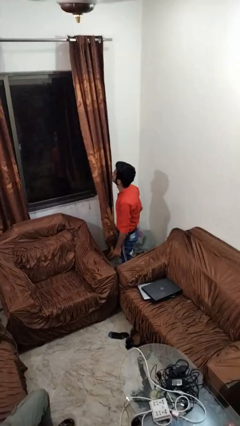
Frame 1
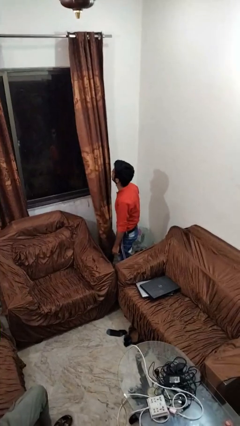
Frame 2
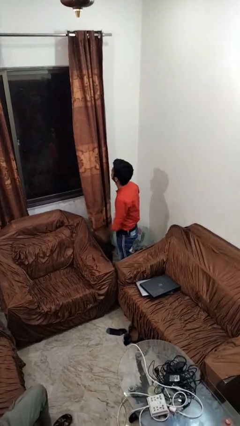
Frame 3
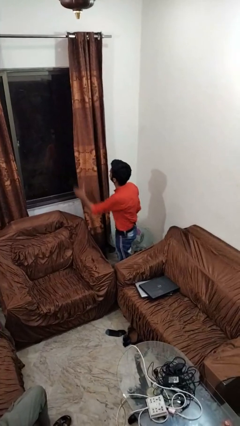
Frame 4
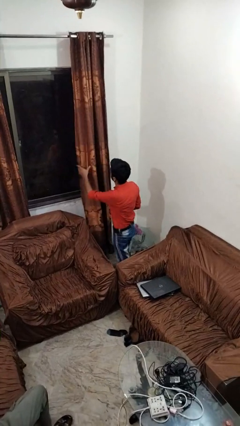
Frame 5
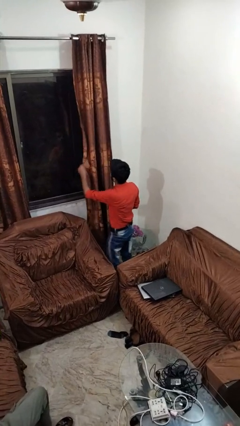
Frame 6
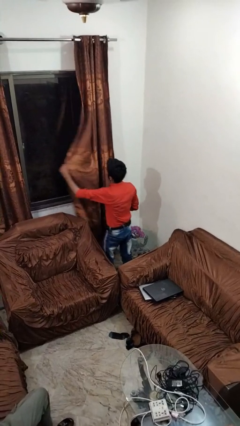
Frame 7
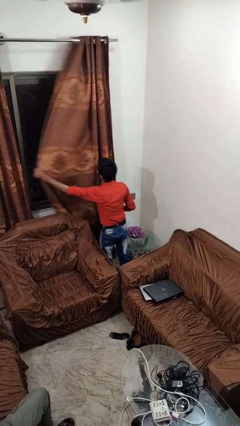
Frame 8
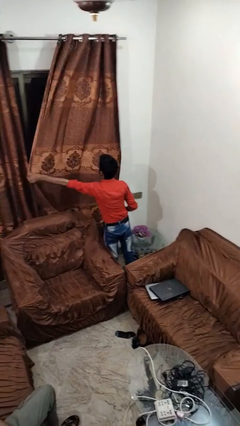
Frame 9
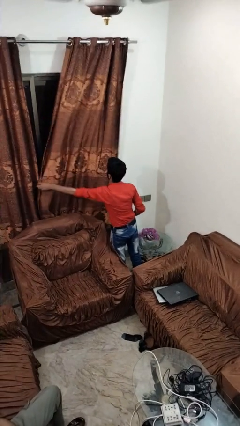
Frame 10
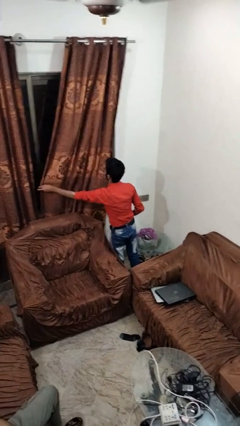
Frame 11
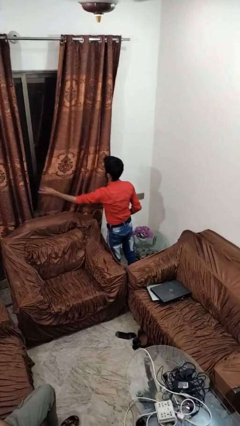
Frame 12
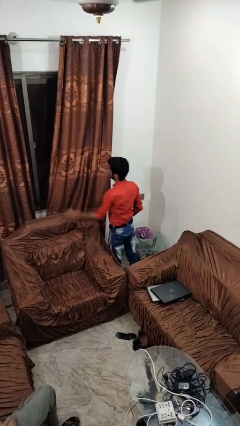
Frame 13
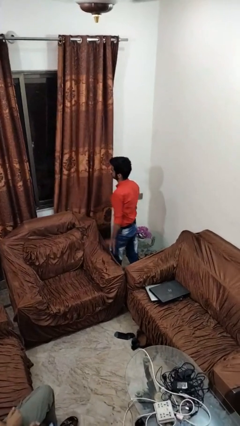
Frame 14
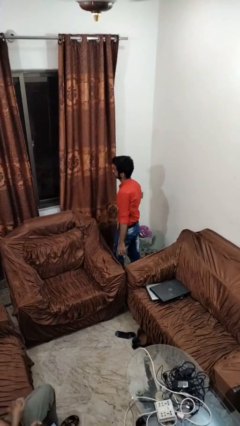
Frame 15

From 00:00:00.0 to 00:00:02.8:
person closes curtains

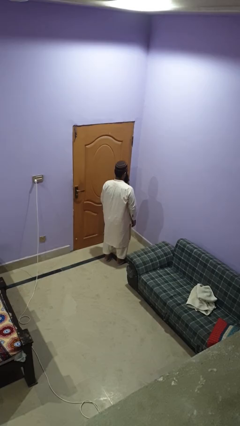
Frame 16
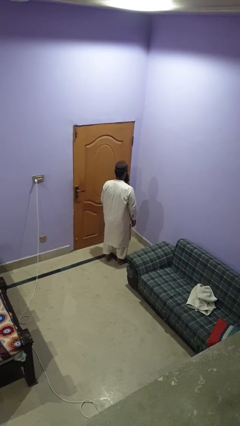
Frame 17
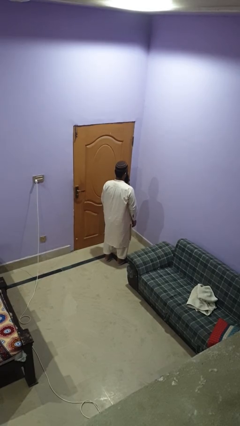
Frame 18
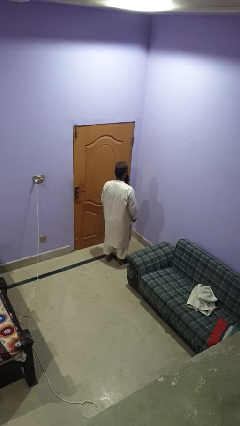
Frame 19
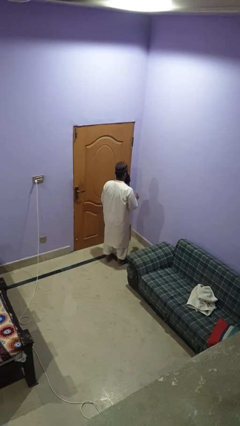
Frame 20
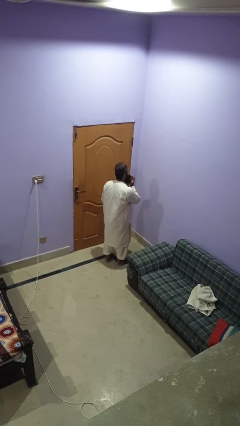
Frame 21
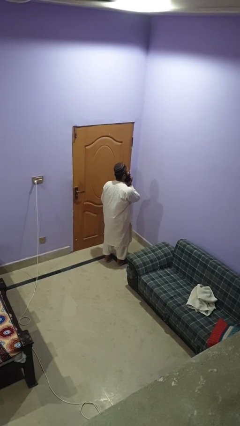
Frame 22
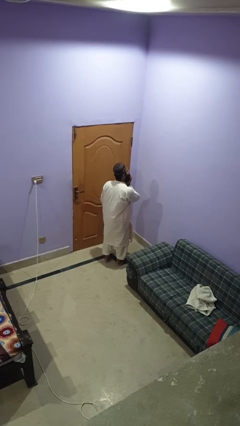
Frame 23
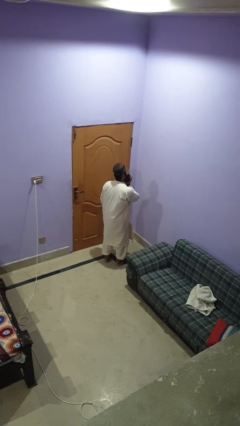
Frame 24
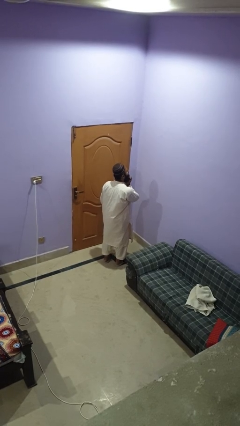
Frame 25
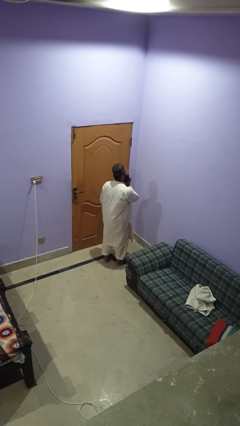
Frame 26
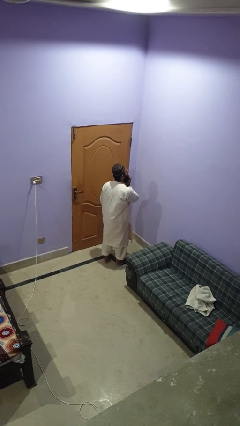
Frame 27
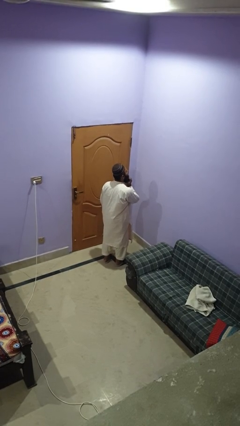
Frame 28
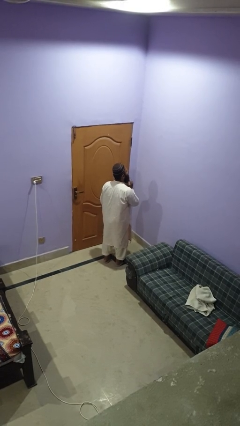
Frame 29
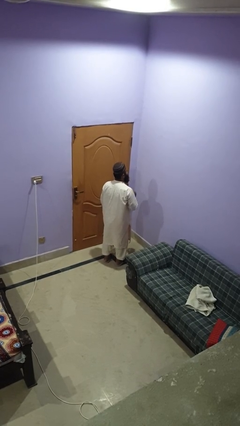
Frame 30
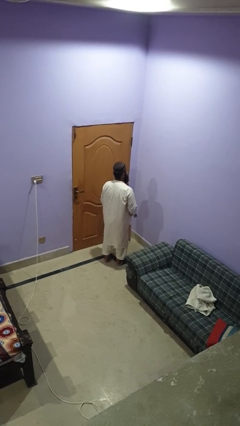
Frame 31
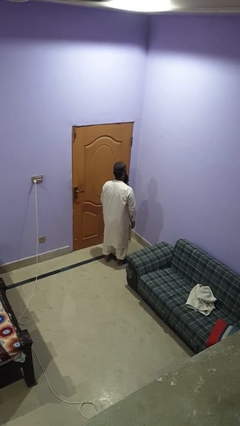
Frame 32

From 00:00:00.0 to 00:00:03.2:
person strokes chin

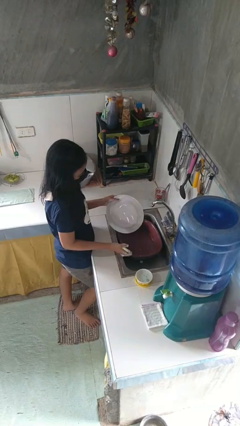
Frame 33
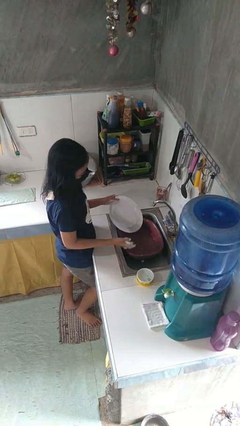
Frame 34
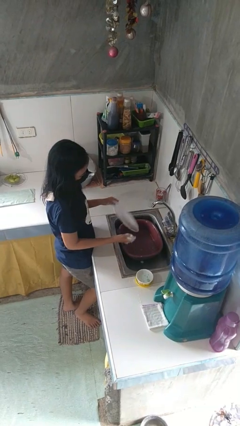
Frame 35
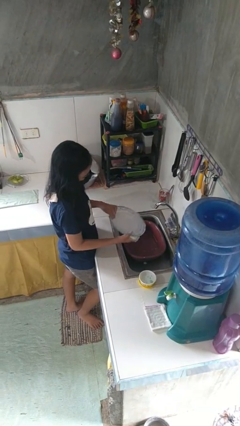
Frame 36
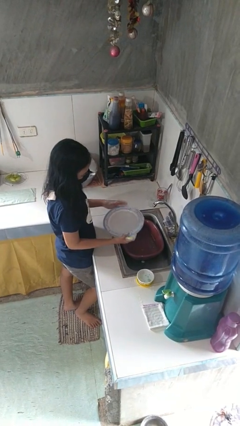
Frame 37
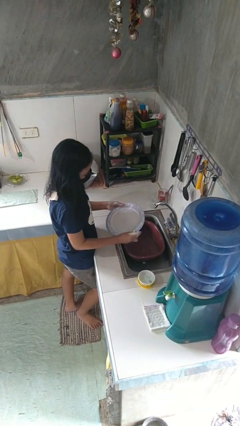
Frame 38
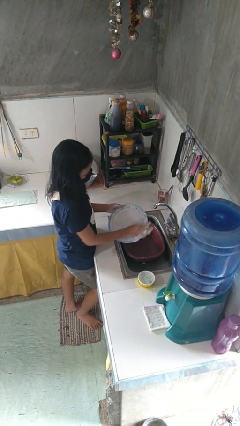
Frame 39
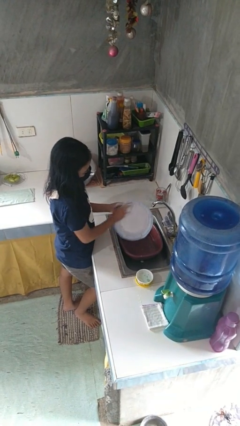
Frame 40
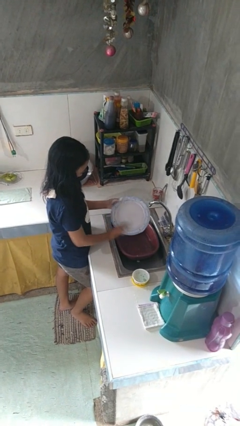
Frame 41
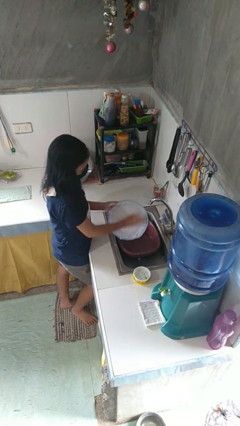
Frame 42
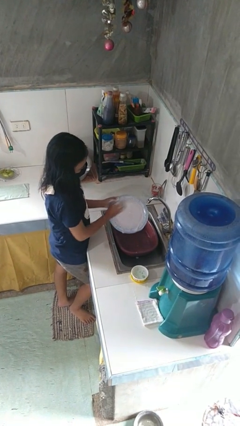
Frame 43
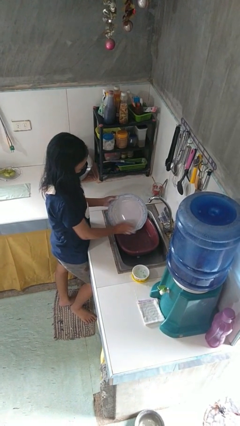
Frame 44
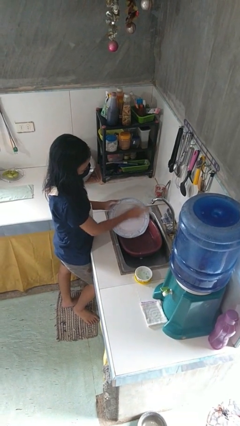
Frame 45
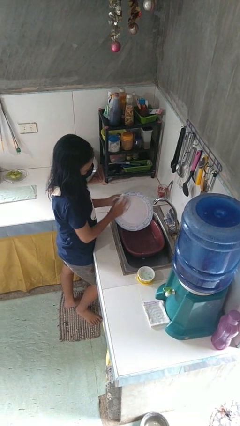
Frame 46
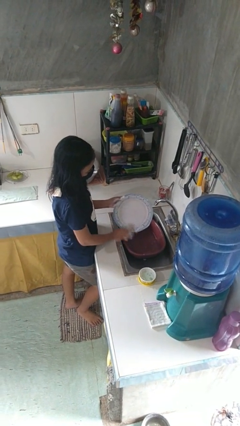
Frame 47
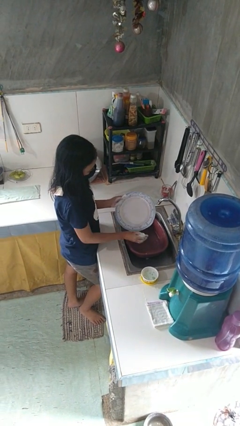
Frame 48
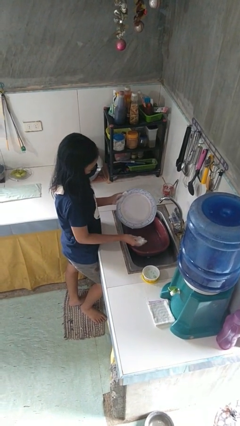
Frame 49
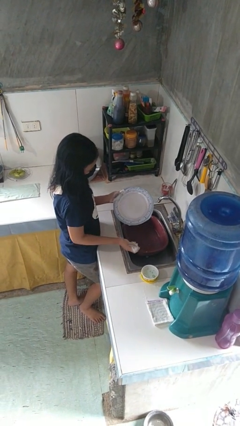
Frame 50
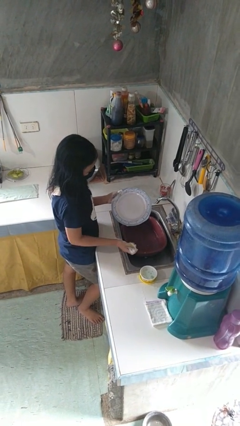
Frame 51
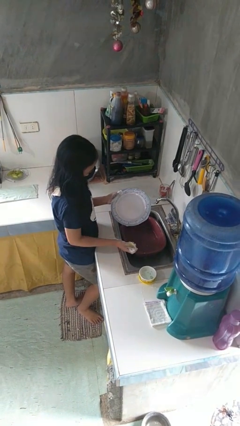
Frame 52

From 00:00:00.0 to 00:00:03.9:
person washes dish

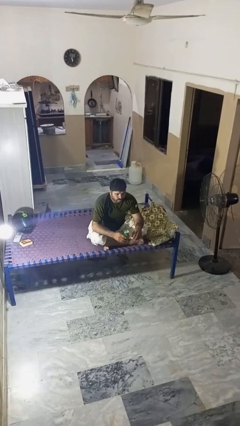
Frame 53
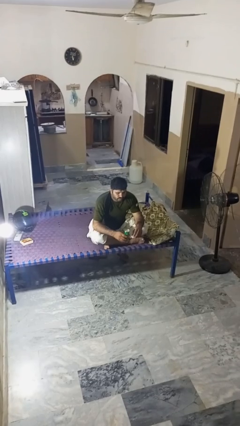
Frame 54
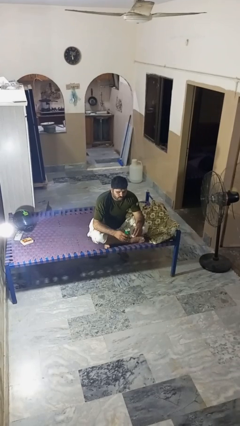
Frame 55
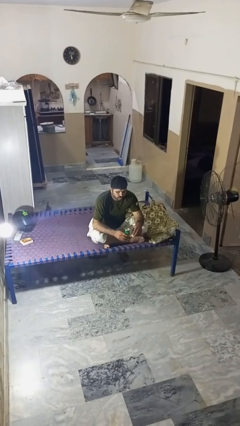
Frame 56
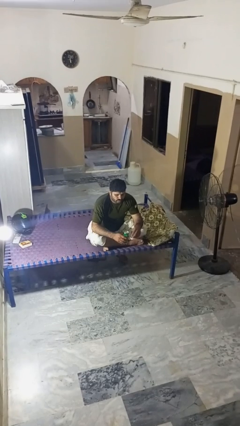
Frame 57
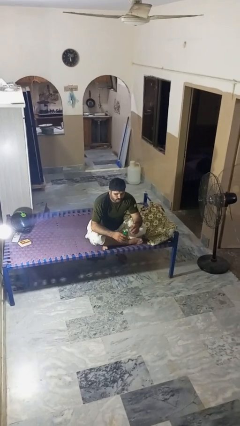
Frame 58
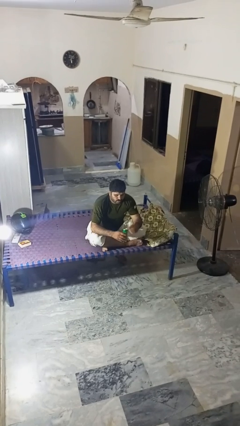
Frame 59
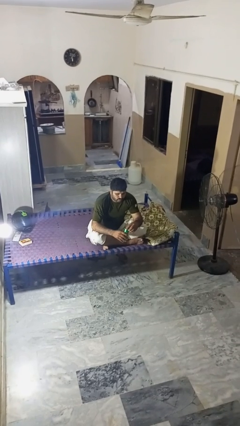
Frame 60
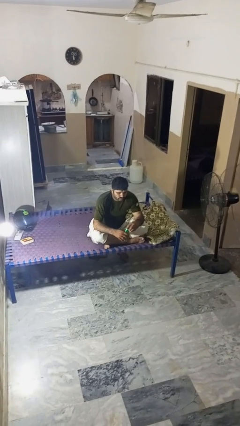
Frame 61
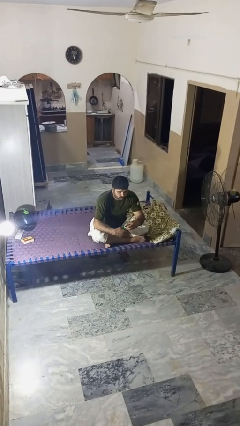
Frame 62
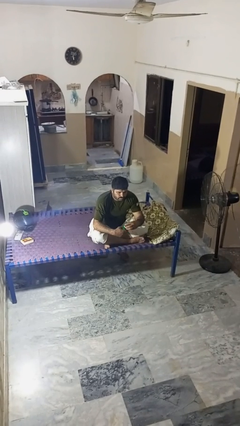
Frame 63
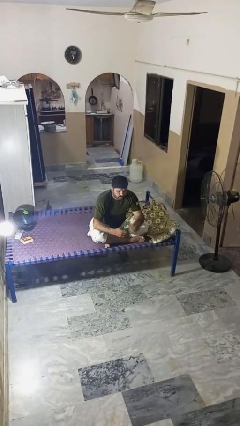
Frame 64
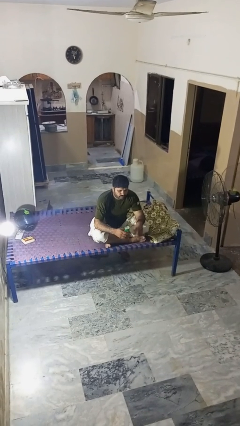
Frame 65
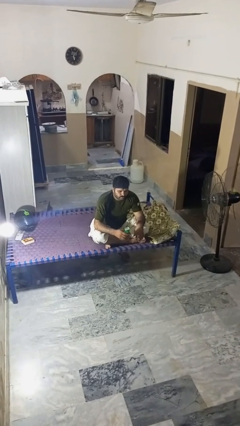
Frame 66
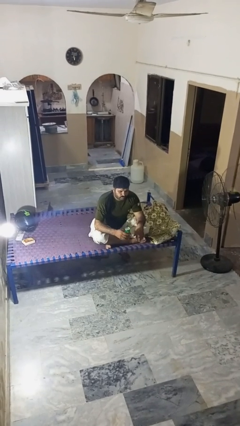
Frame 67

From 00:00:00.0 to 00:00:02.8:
person opens beverage can

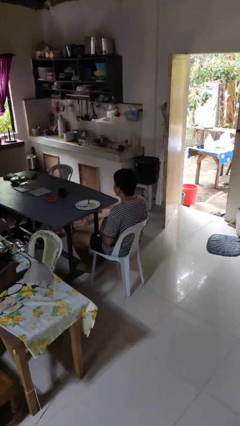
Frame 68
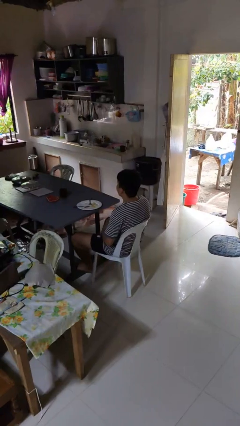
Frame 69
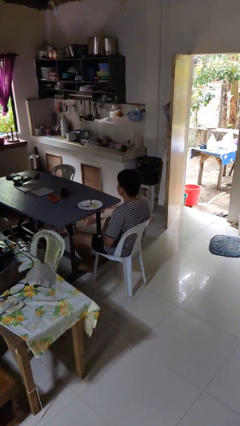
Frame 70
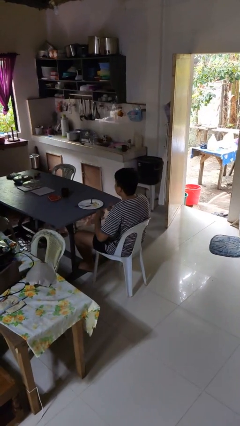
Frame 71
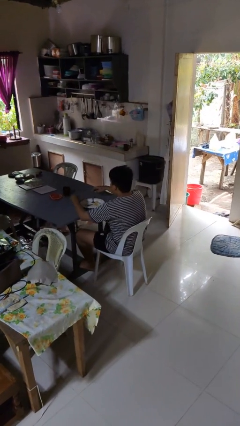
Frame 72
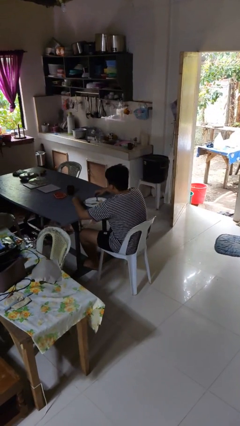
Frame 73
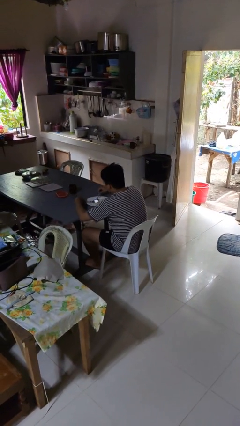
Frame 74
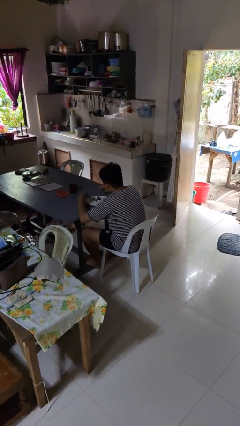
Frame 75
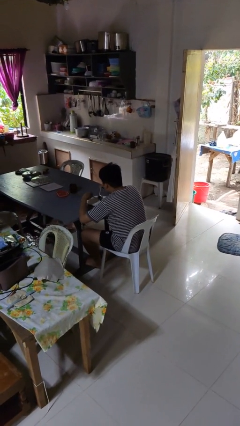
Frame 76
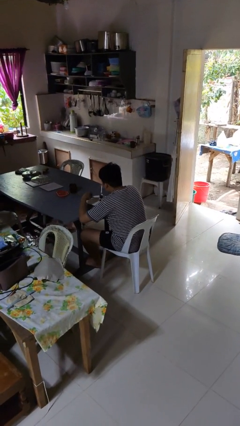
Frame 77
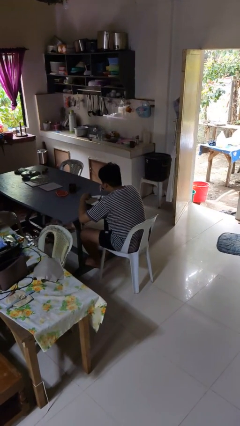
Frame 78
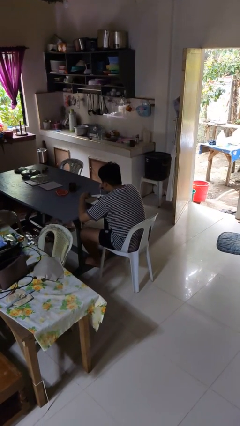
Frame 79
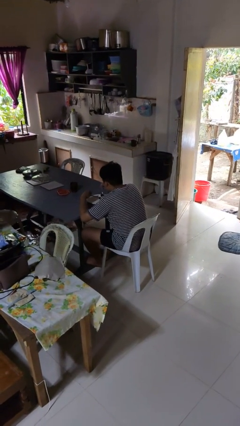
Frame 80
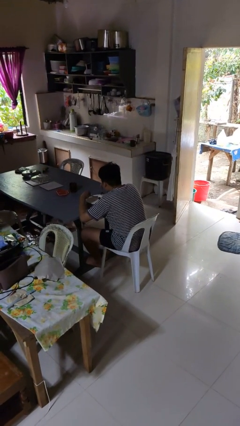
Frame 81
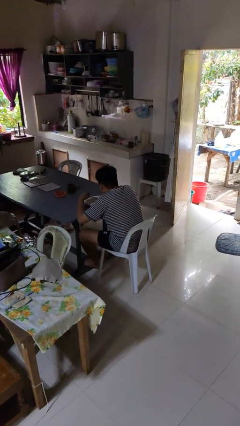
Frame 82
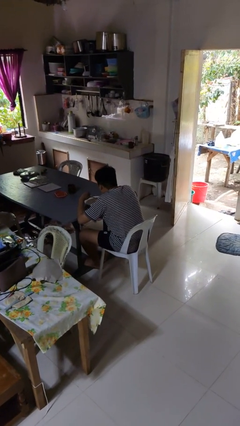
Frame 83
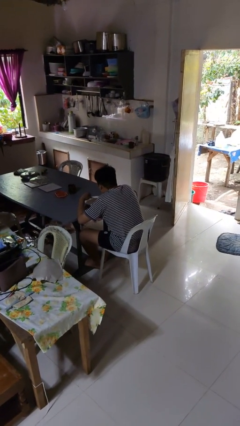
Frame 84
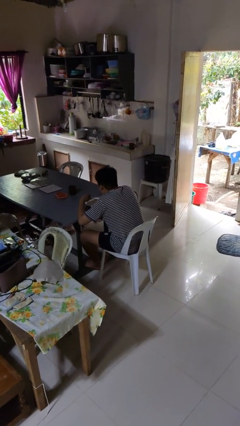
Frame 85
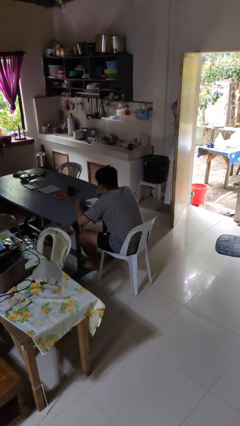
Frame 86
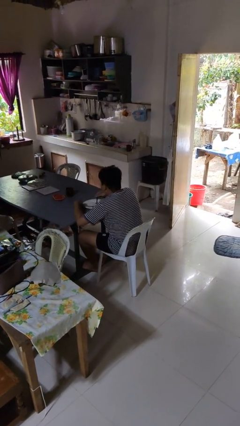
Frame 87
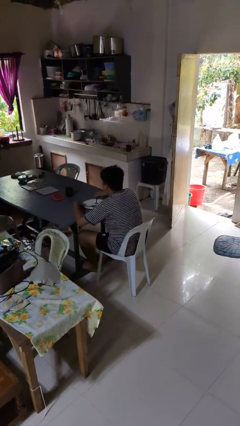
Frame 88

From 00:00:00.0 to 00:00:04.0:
person eats with utensil

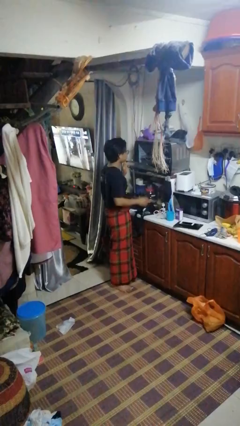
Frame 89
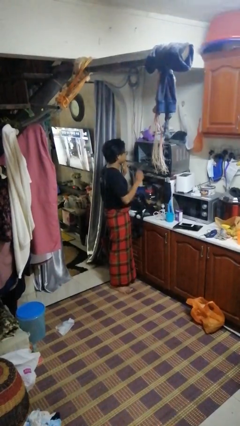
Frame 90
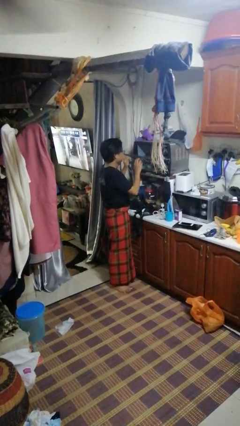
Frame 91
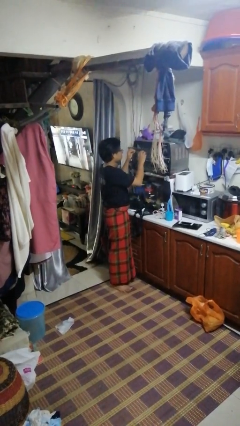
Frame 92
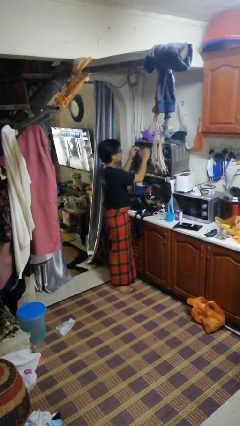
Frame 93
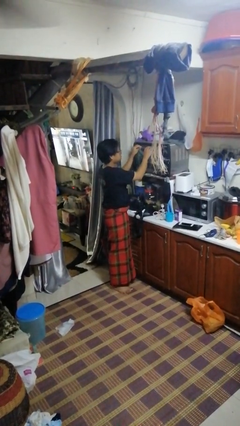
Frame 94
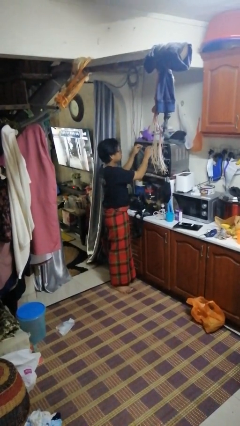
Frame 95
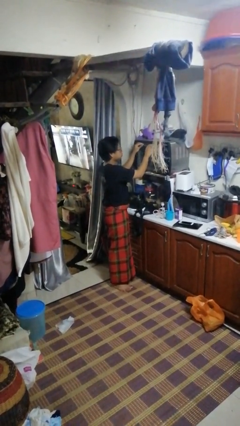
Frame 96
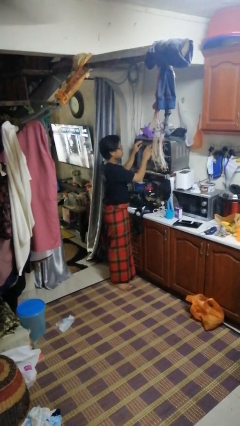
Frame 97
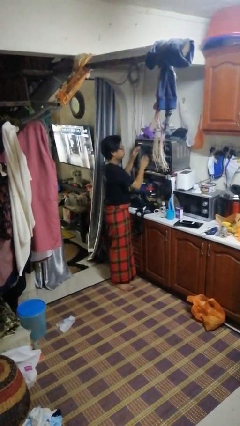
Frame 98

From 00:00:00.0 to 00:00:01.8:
person closes oven door
